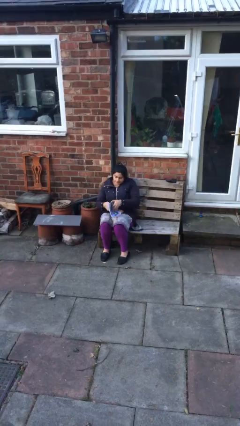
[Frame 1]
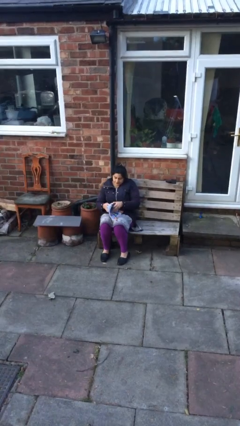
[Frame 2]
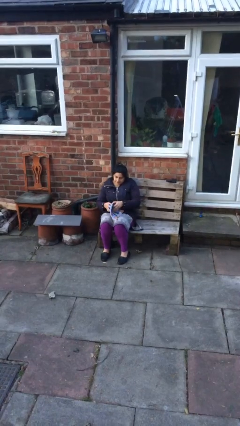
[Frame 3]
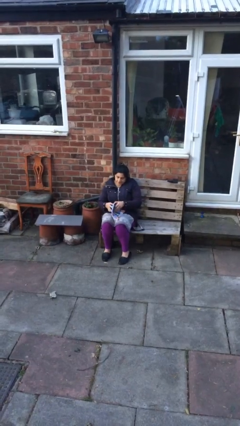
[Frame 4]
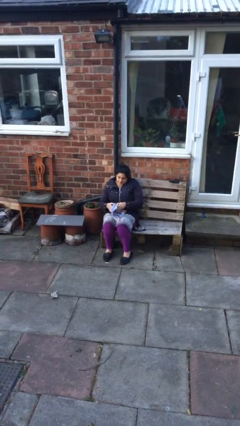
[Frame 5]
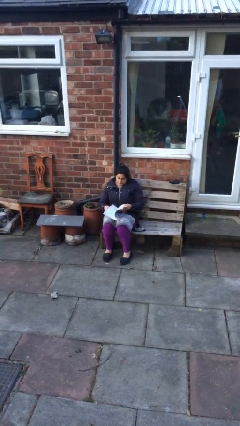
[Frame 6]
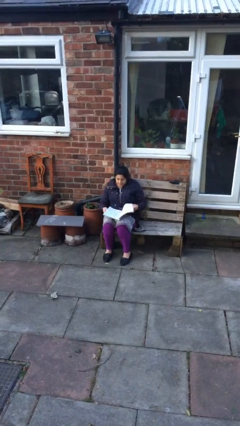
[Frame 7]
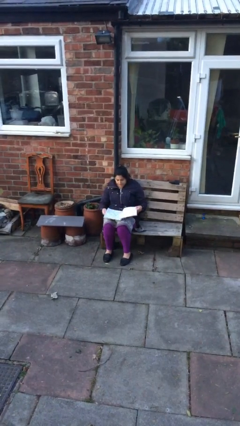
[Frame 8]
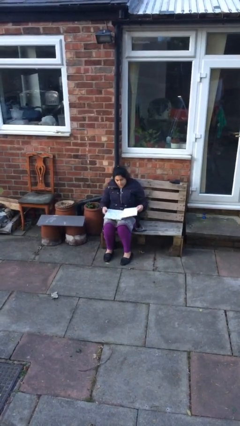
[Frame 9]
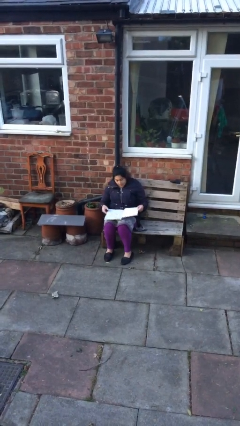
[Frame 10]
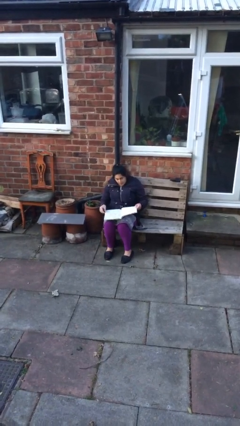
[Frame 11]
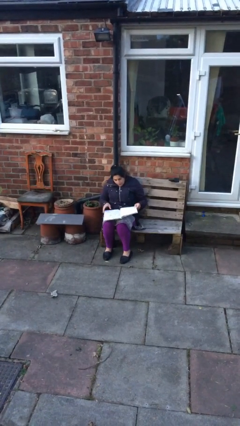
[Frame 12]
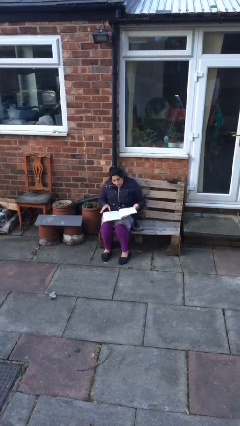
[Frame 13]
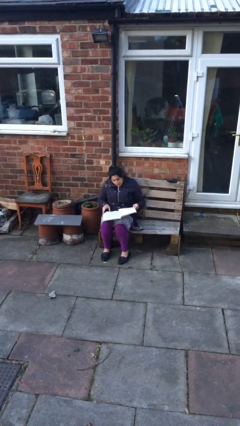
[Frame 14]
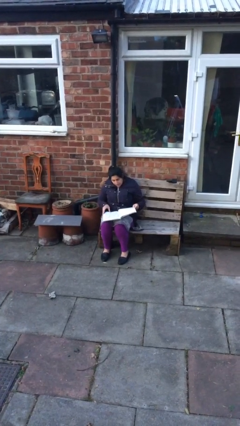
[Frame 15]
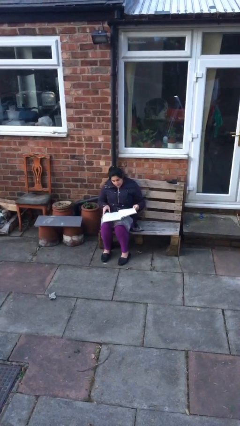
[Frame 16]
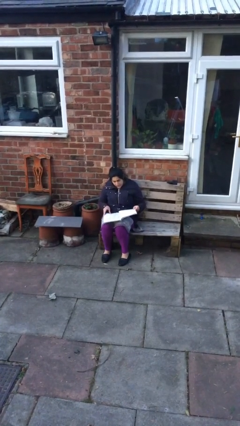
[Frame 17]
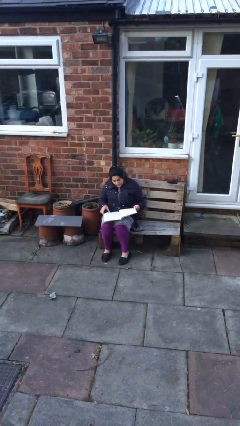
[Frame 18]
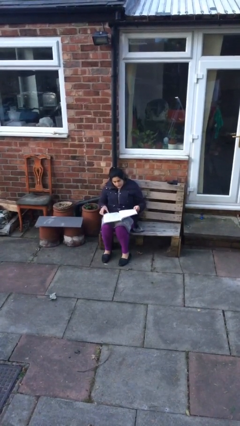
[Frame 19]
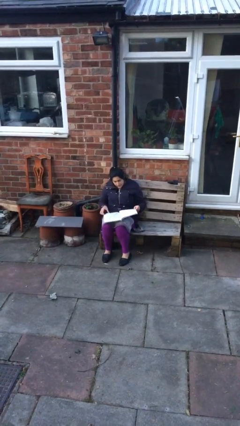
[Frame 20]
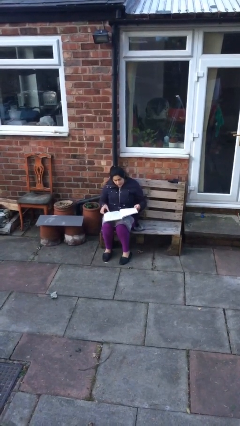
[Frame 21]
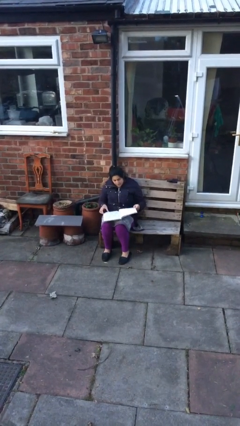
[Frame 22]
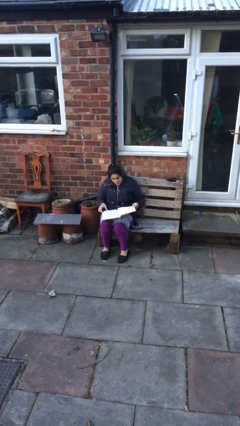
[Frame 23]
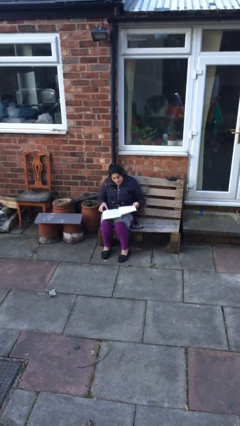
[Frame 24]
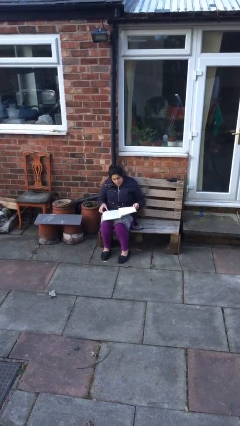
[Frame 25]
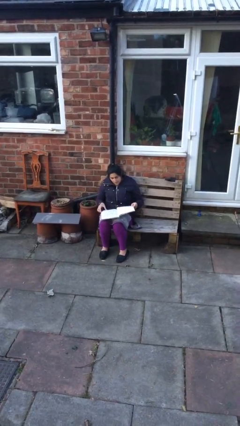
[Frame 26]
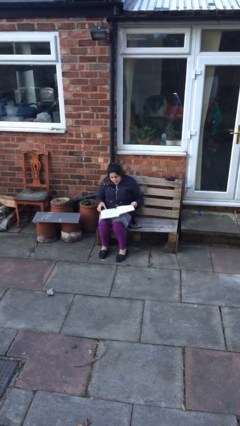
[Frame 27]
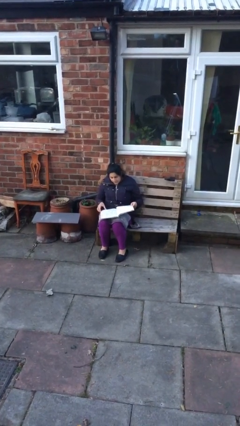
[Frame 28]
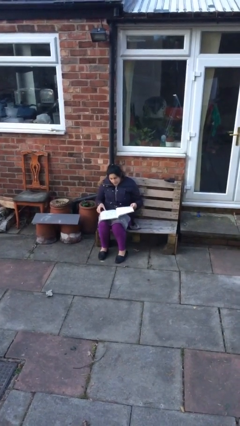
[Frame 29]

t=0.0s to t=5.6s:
person reads document

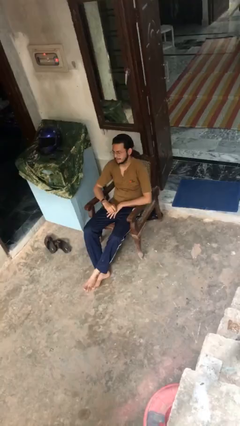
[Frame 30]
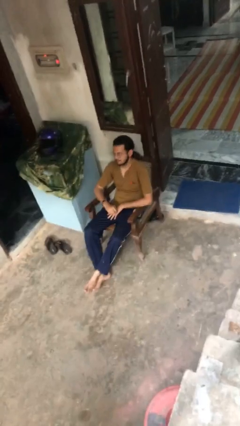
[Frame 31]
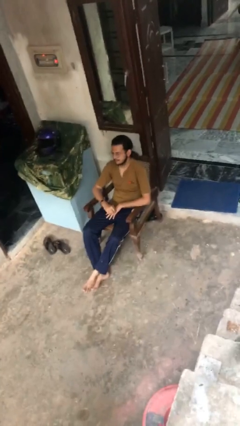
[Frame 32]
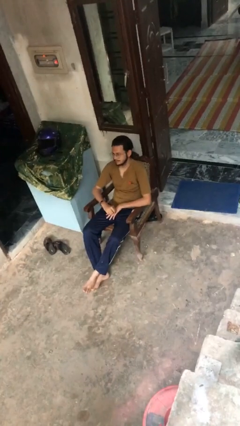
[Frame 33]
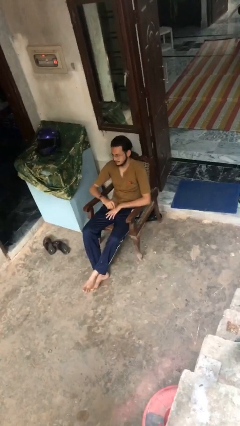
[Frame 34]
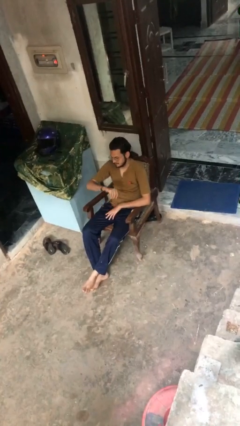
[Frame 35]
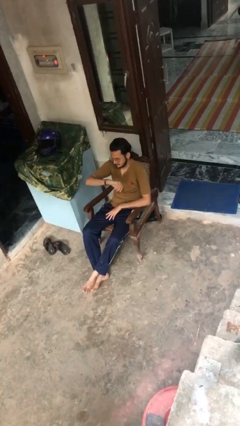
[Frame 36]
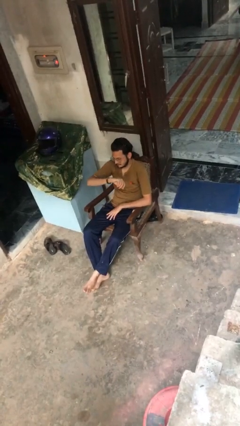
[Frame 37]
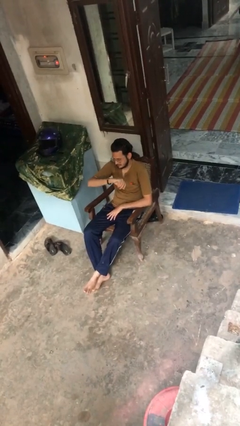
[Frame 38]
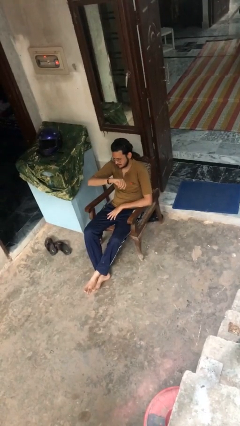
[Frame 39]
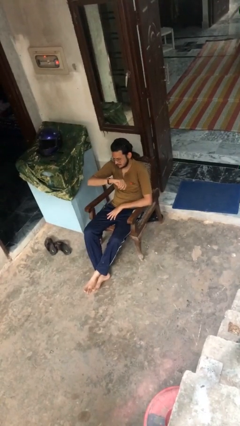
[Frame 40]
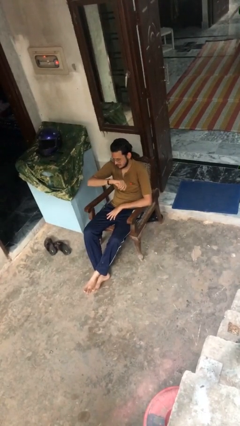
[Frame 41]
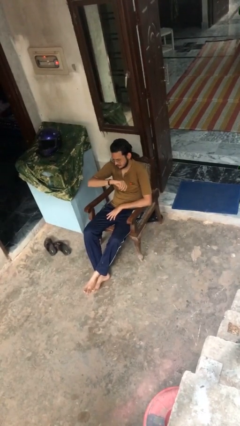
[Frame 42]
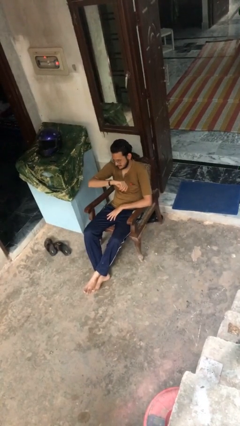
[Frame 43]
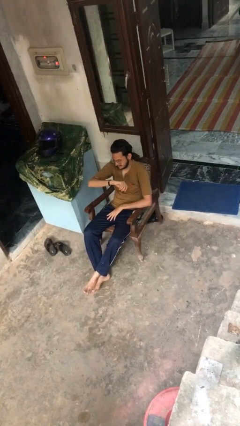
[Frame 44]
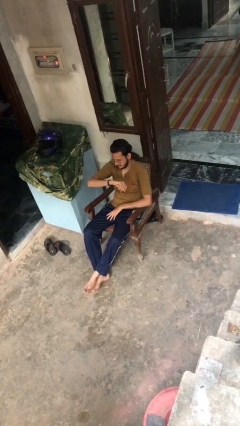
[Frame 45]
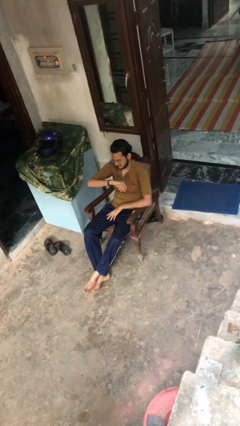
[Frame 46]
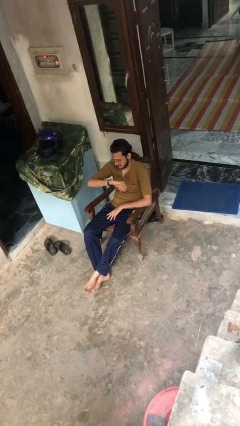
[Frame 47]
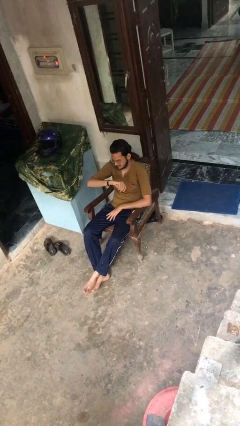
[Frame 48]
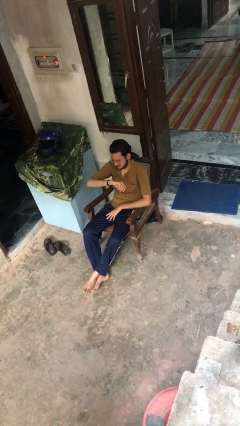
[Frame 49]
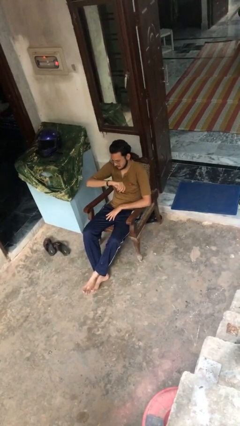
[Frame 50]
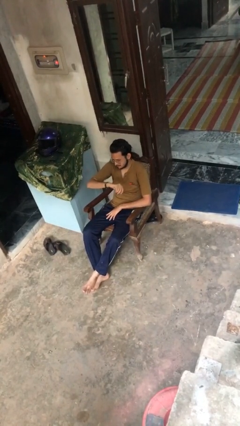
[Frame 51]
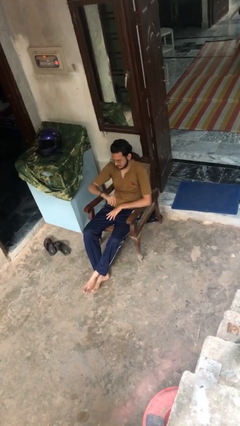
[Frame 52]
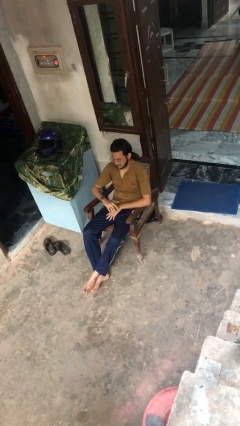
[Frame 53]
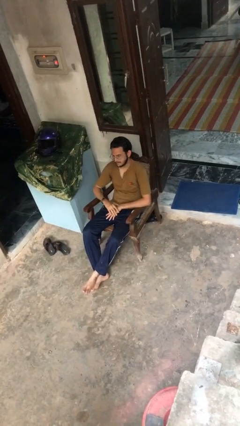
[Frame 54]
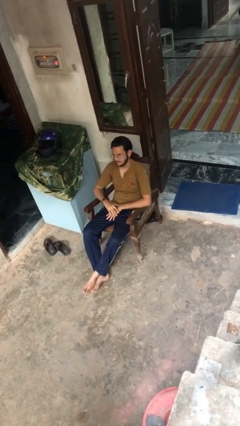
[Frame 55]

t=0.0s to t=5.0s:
person looks at wristwatch

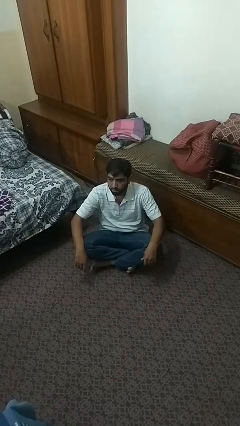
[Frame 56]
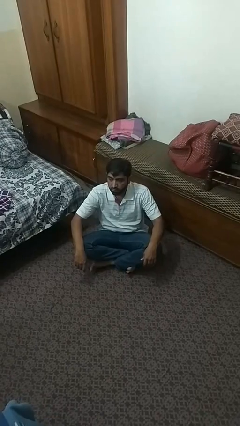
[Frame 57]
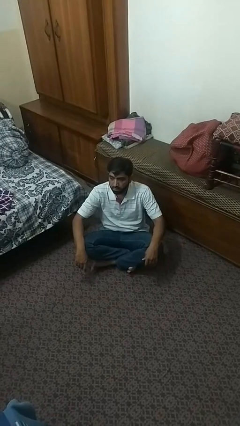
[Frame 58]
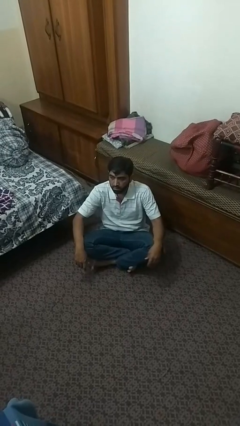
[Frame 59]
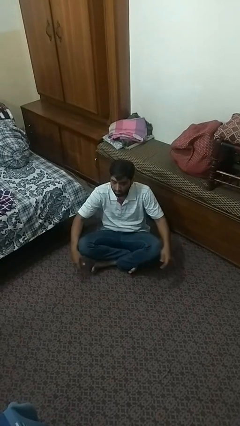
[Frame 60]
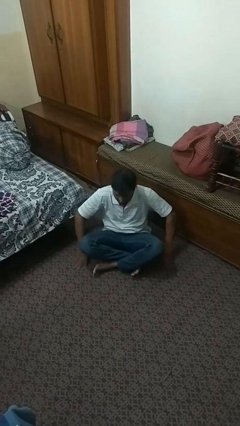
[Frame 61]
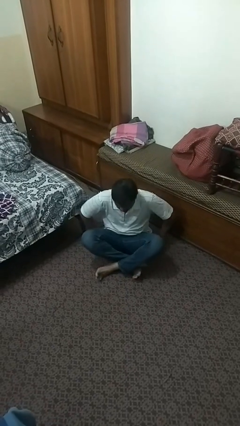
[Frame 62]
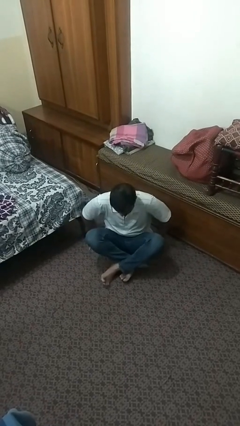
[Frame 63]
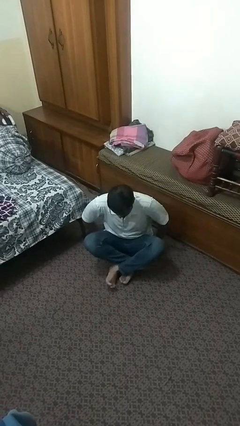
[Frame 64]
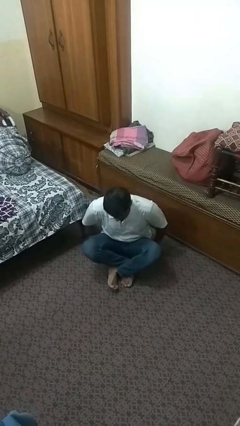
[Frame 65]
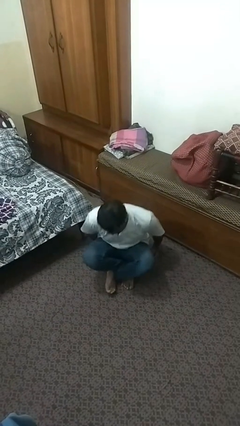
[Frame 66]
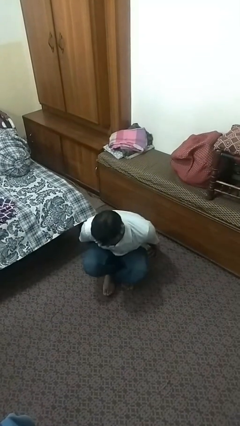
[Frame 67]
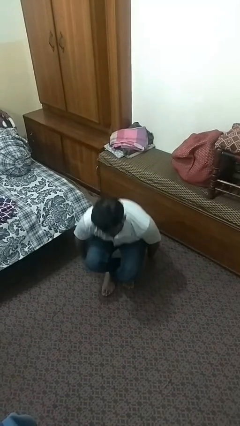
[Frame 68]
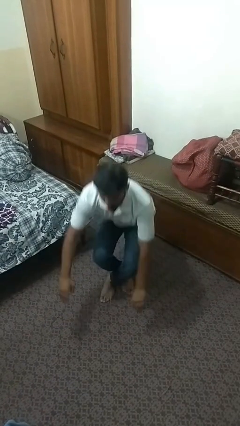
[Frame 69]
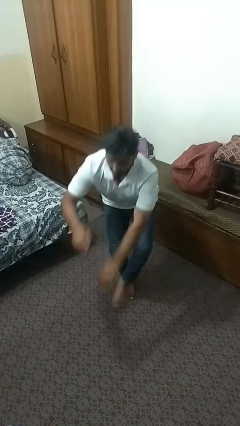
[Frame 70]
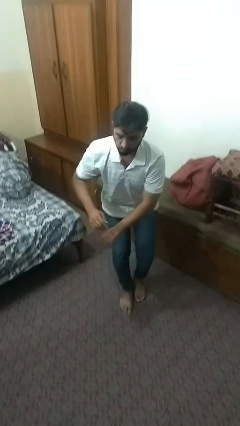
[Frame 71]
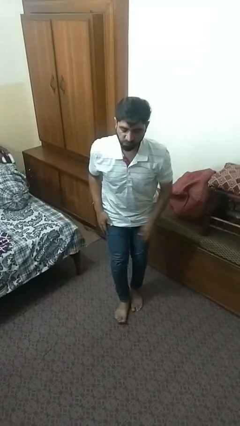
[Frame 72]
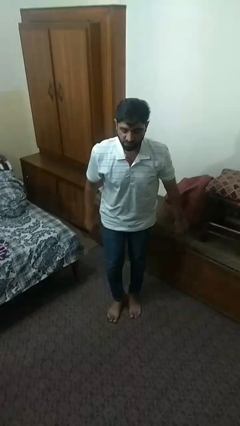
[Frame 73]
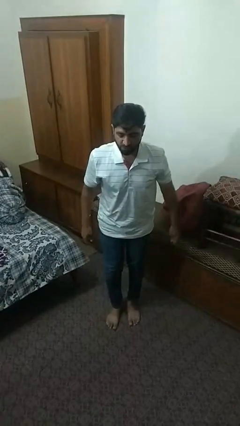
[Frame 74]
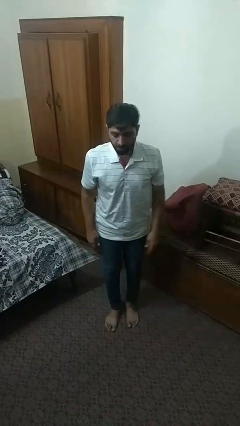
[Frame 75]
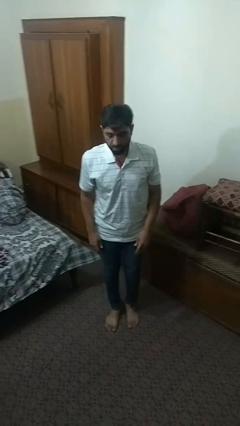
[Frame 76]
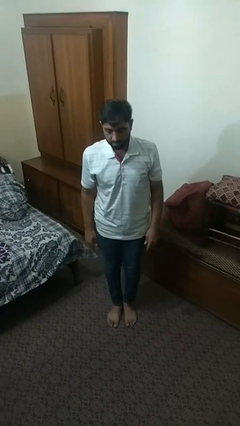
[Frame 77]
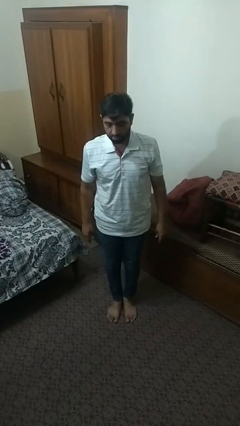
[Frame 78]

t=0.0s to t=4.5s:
person stands up from floor

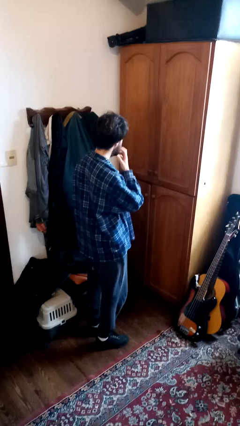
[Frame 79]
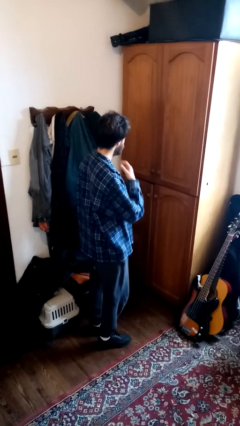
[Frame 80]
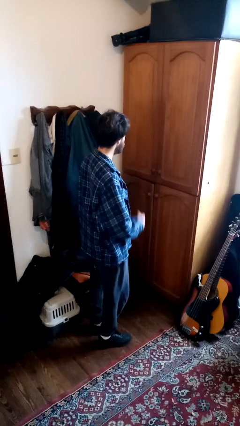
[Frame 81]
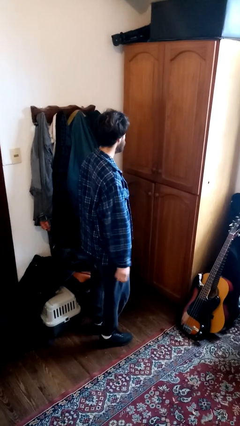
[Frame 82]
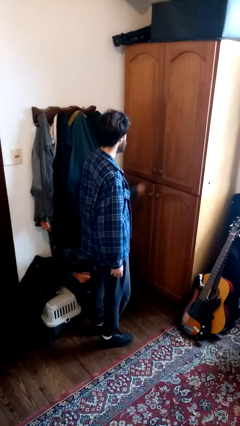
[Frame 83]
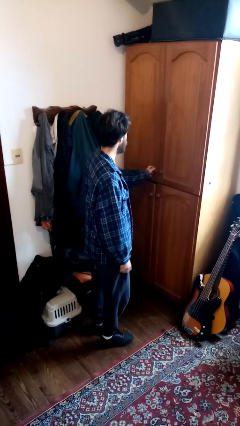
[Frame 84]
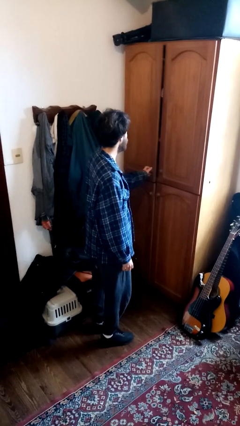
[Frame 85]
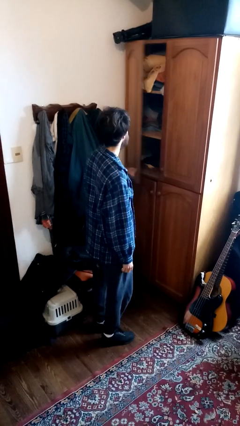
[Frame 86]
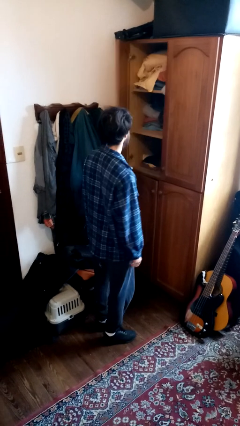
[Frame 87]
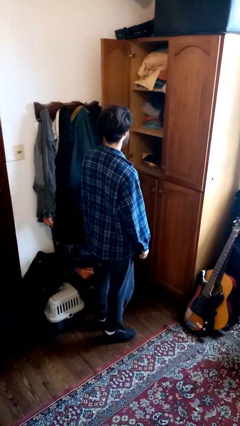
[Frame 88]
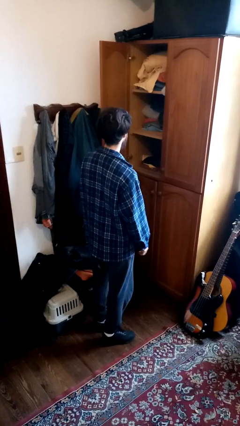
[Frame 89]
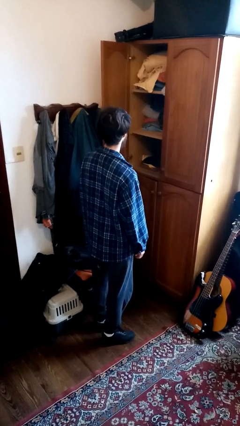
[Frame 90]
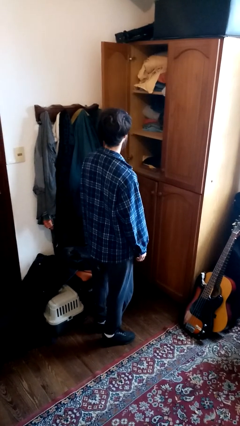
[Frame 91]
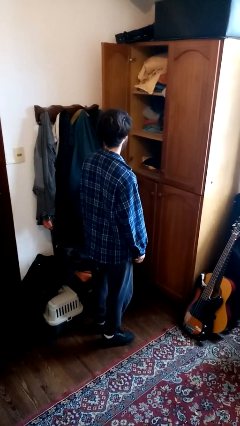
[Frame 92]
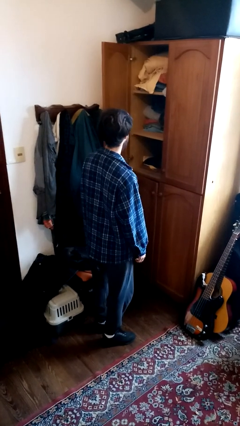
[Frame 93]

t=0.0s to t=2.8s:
person opens dresser drawer
